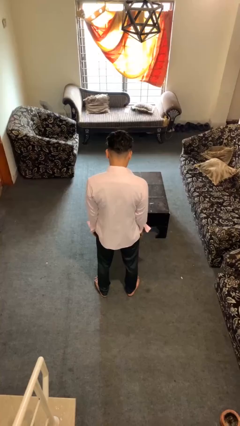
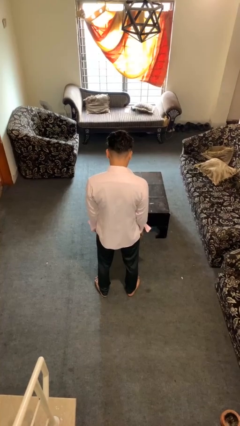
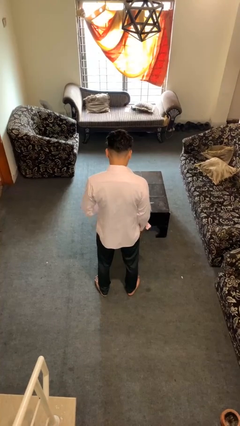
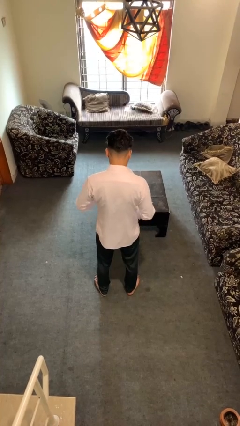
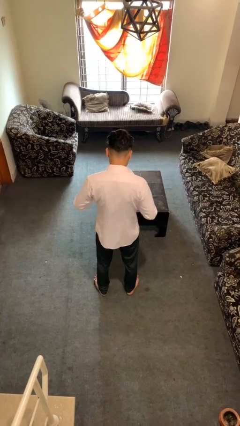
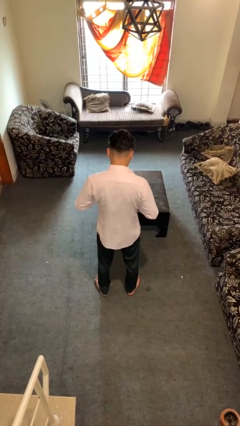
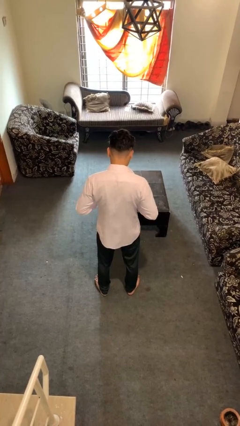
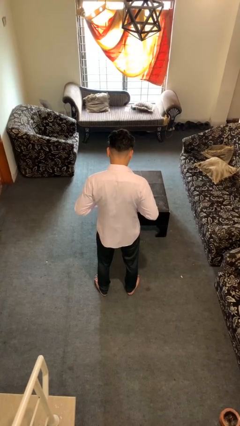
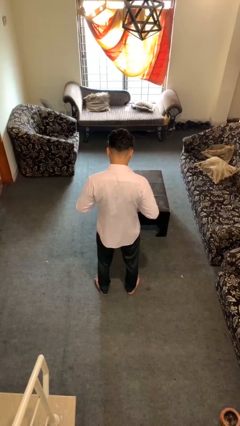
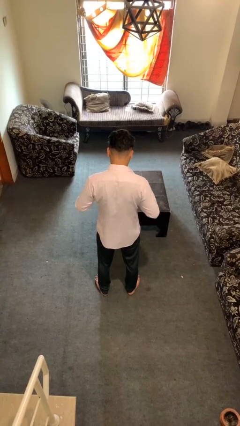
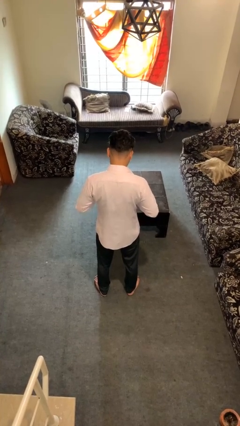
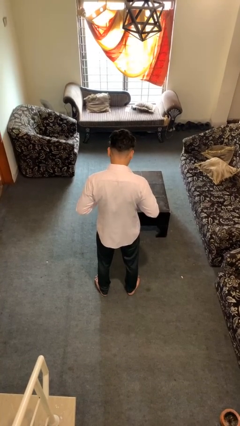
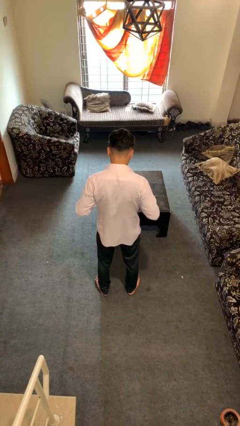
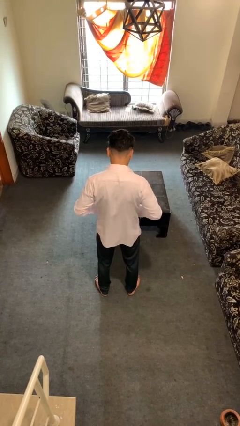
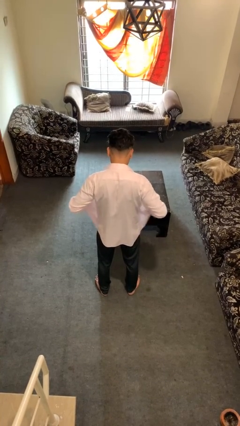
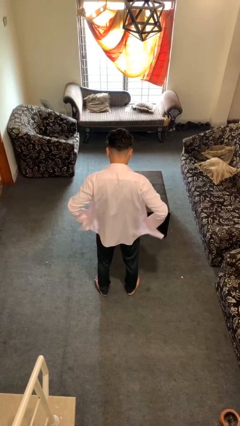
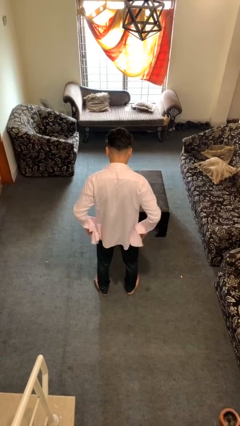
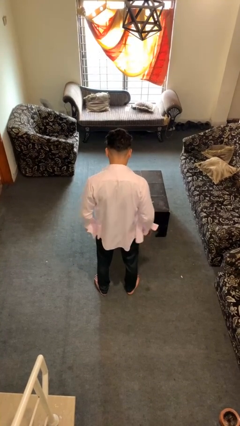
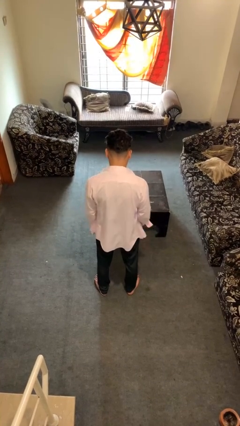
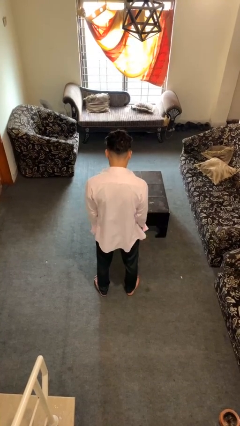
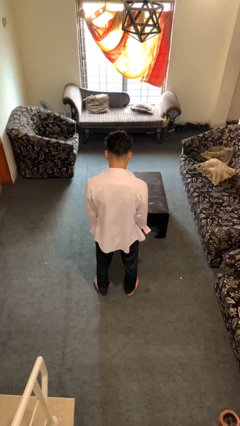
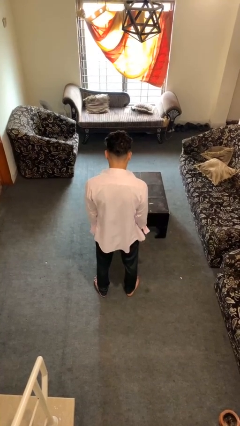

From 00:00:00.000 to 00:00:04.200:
person unbuttons shirt

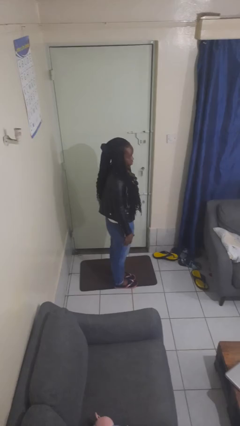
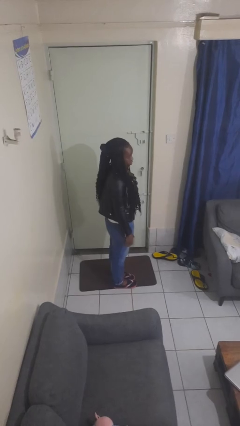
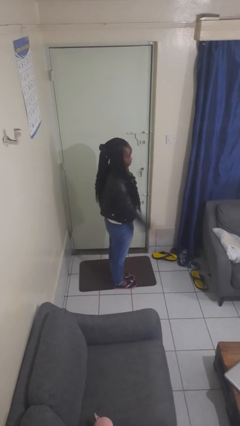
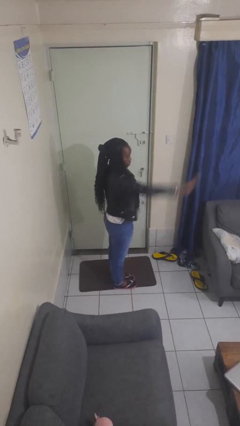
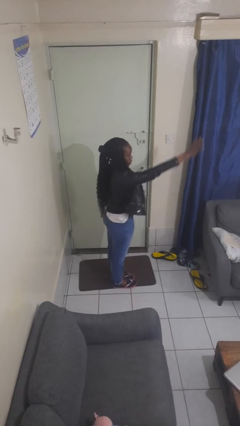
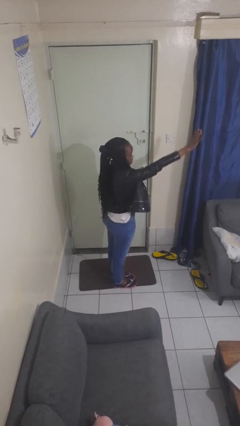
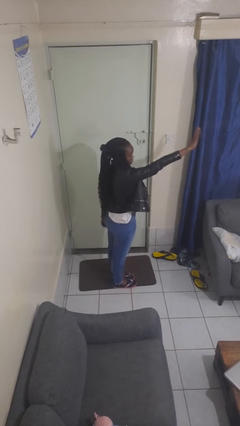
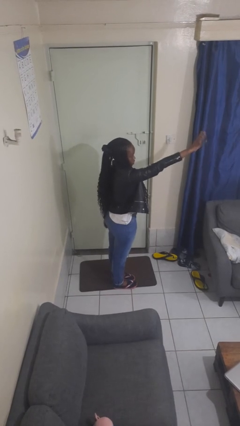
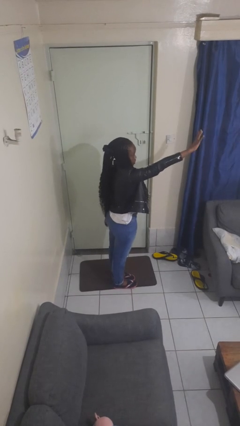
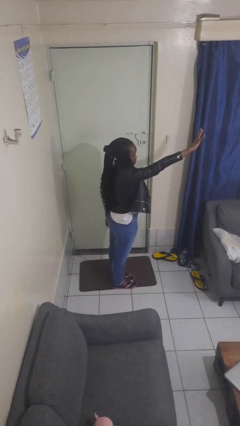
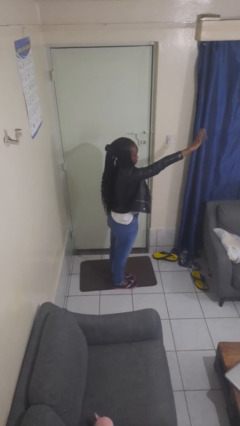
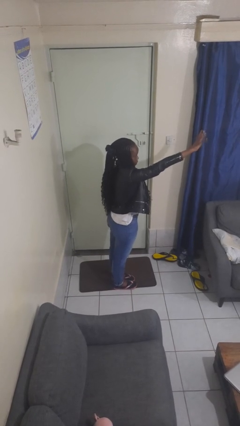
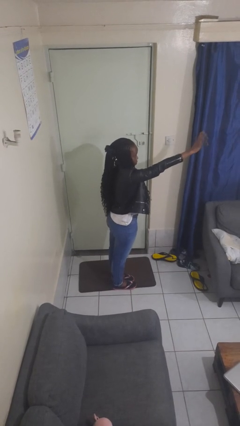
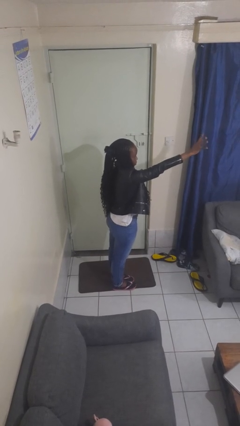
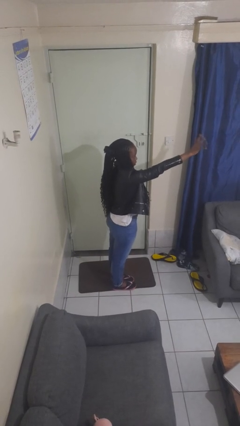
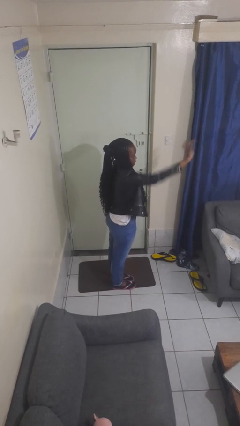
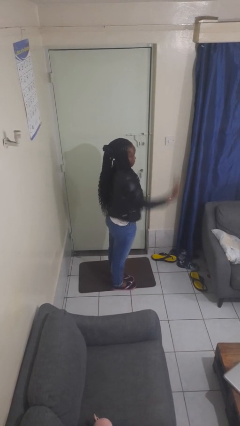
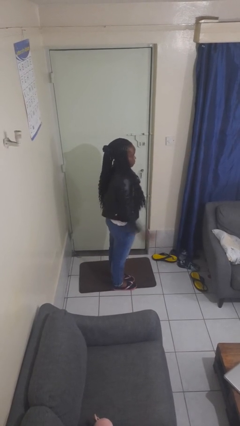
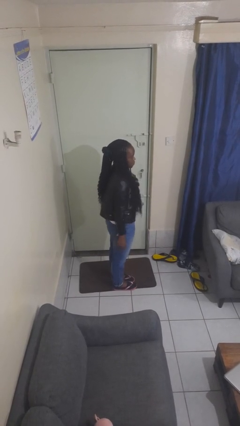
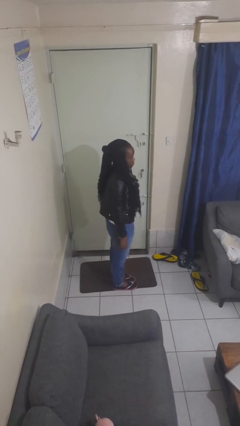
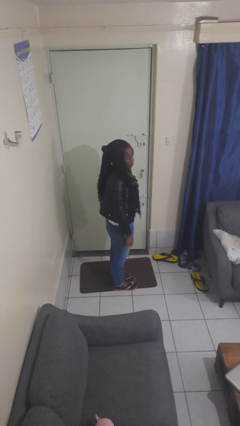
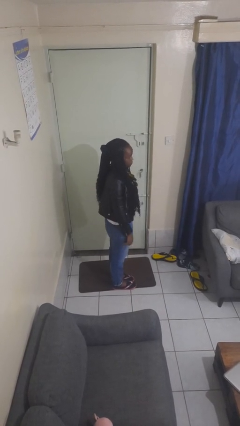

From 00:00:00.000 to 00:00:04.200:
person waves at person

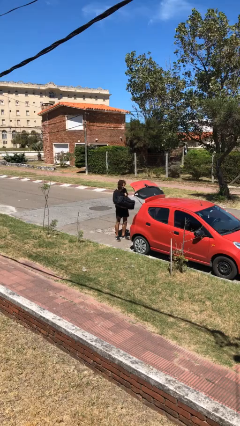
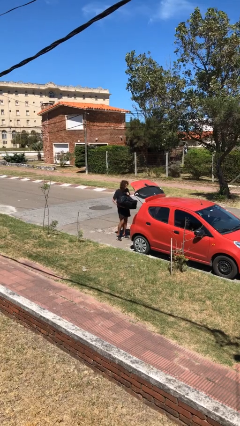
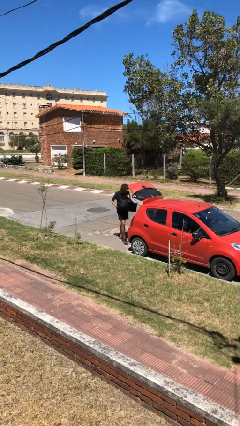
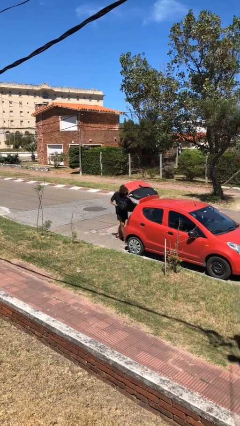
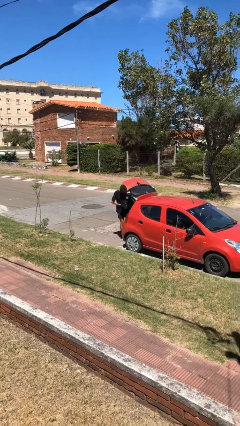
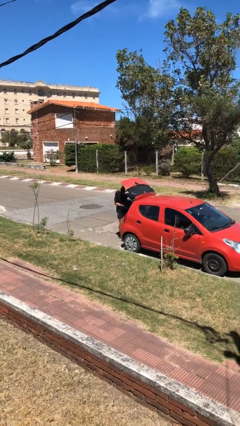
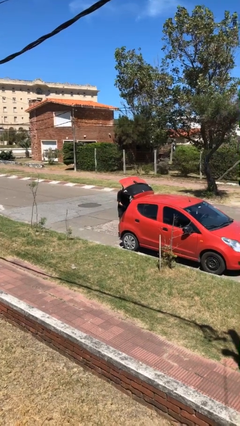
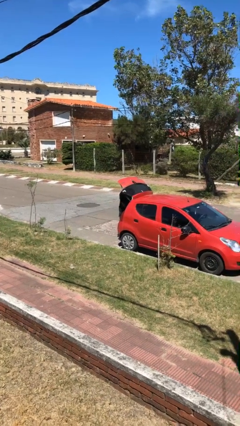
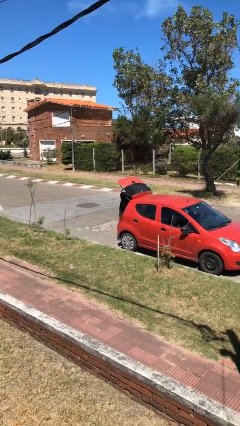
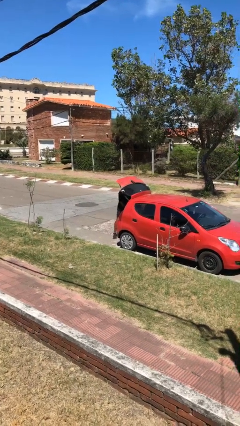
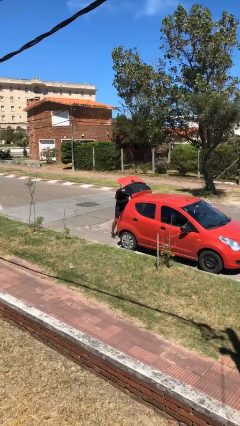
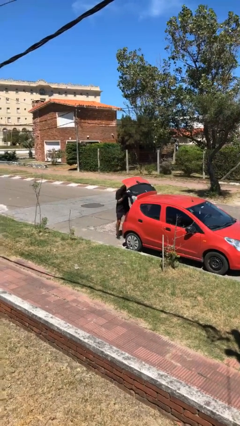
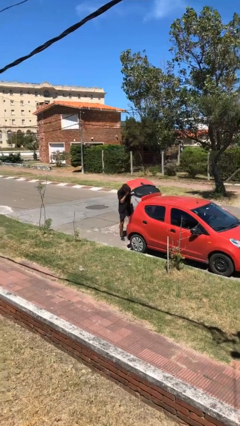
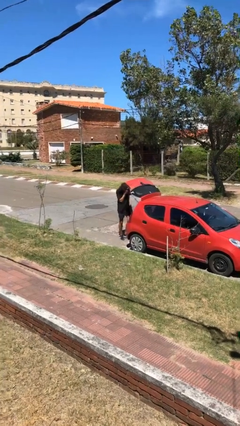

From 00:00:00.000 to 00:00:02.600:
person loads car

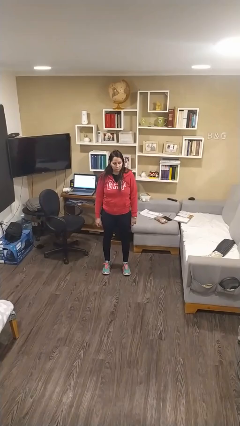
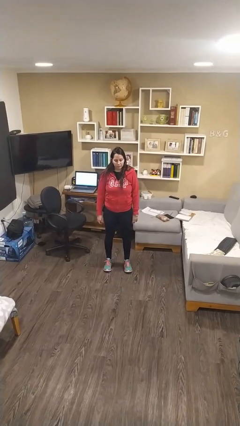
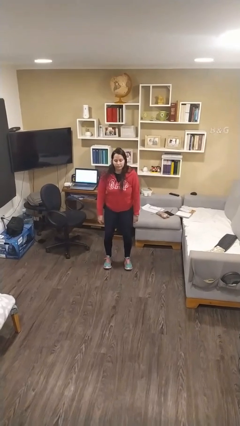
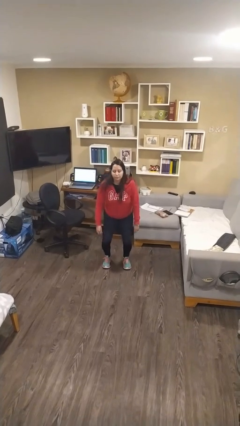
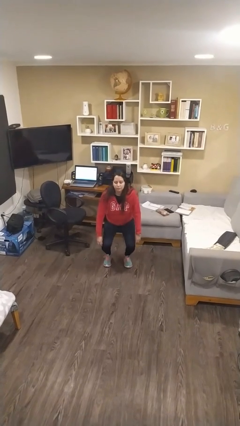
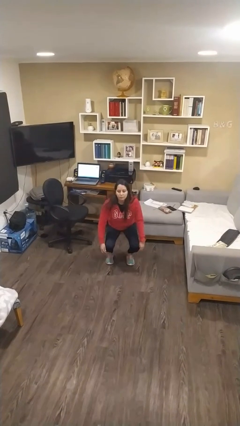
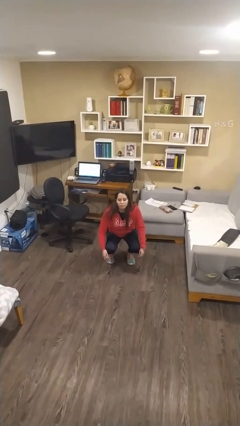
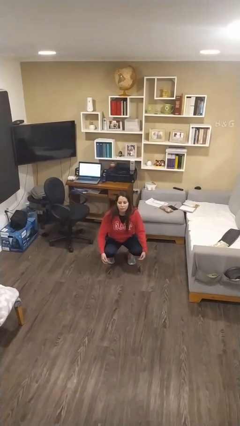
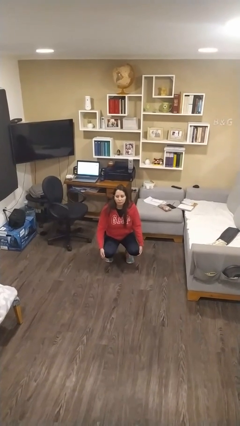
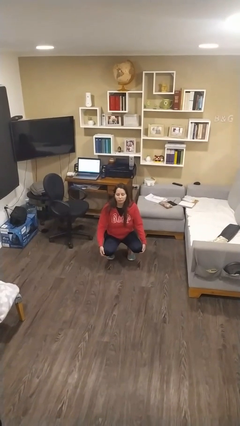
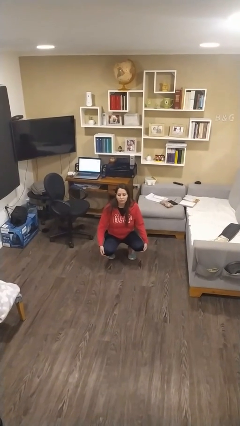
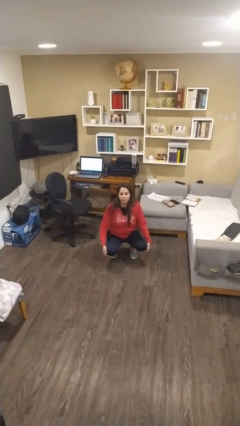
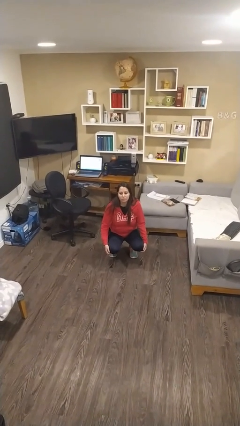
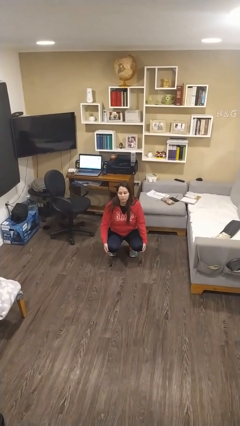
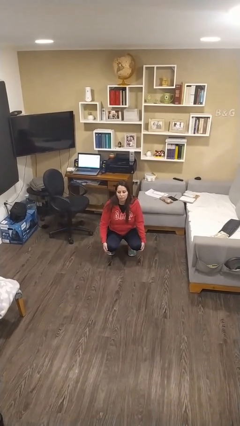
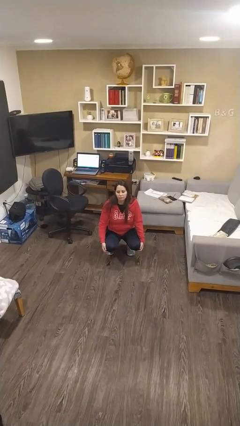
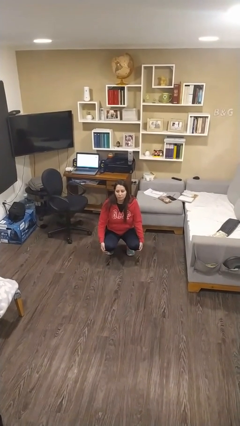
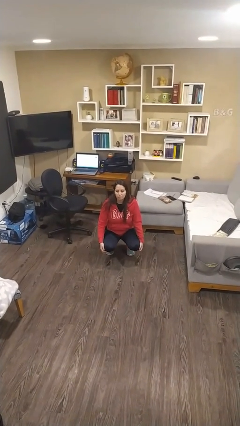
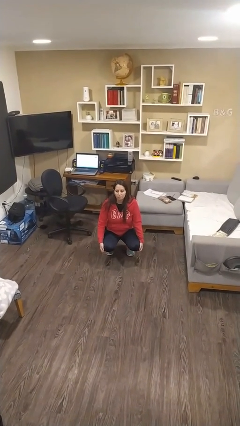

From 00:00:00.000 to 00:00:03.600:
person squats

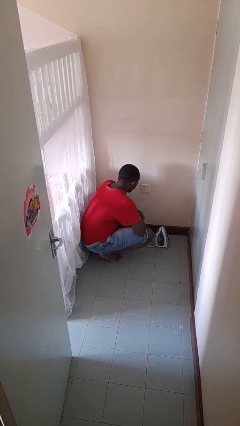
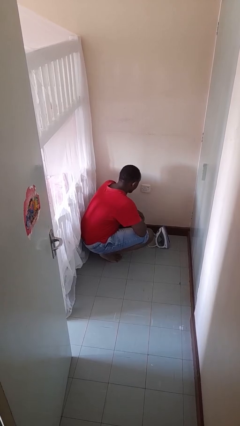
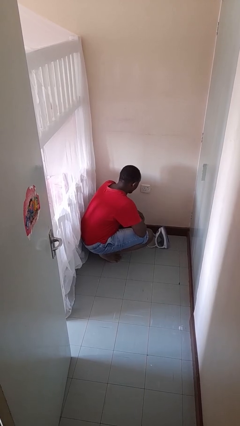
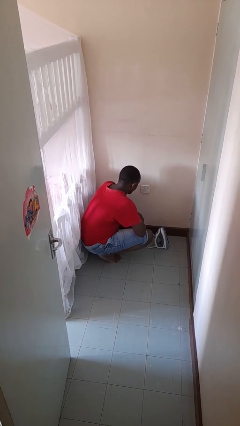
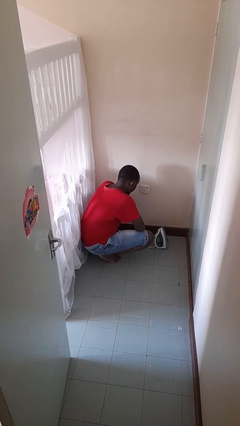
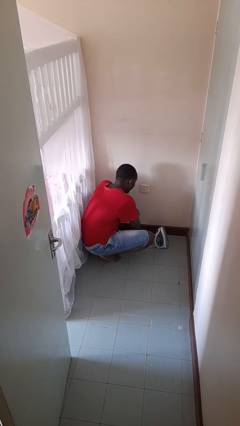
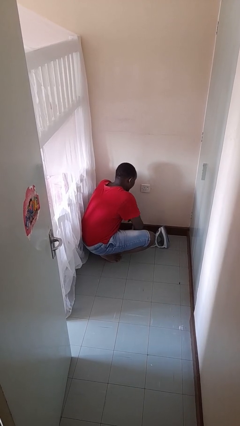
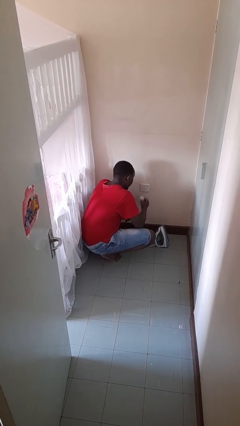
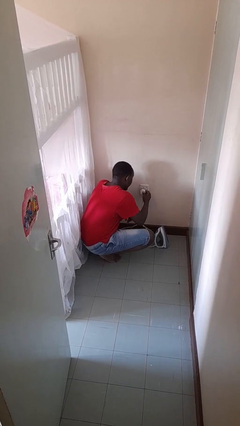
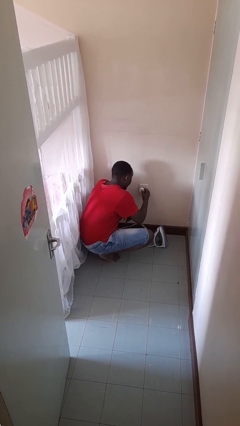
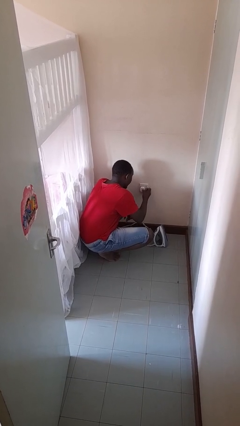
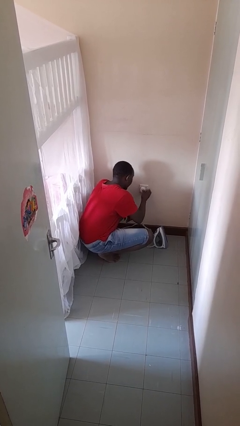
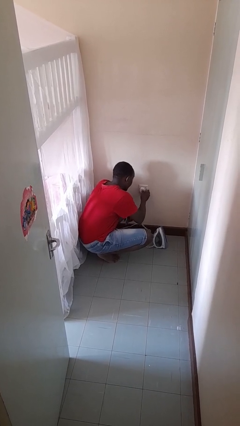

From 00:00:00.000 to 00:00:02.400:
person plugs into electrical socket

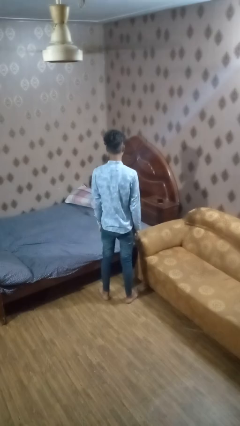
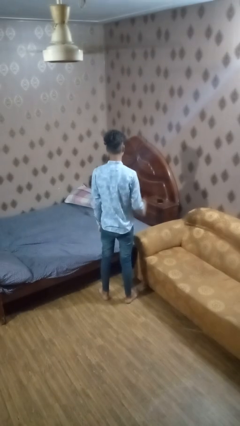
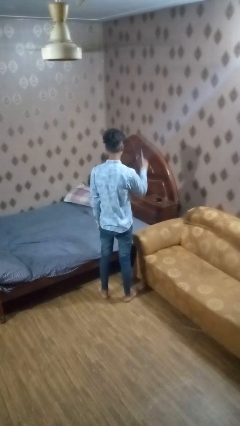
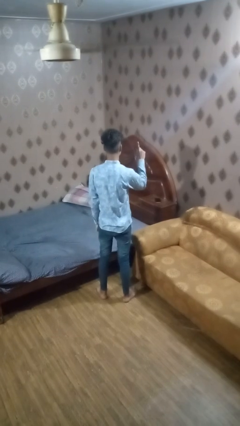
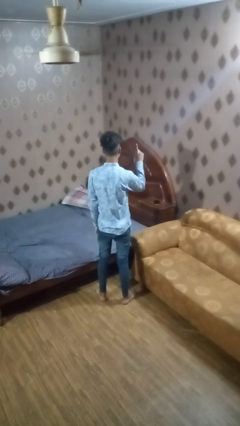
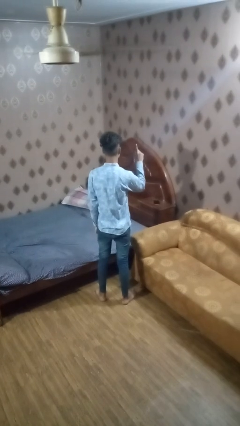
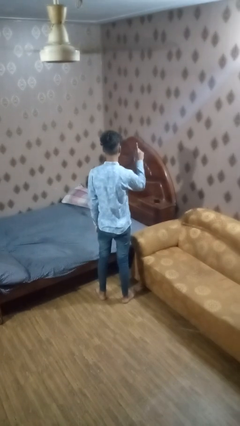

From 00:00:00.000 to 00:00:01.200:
person gestures number one
